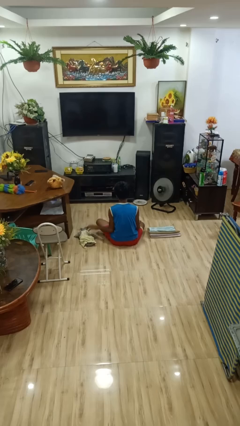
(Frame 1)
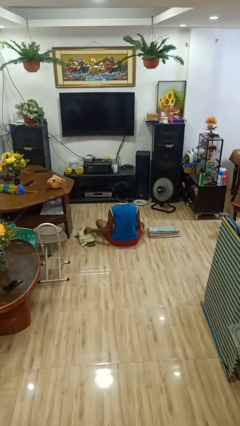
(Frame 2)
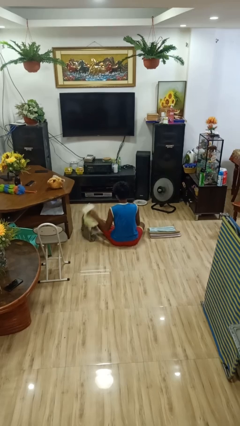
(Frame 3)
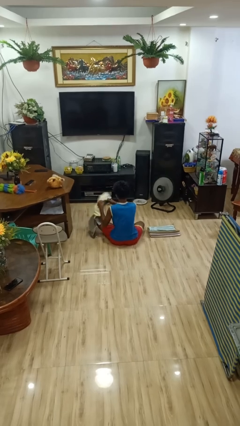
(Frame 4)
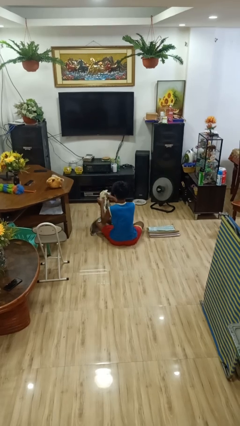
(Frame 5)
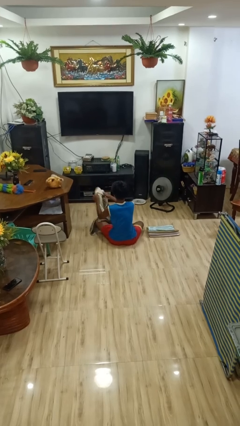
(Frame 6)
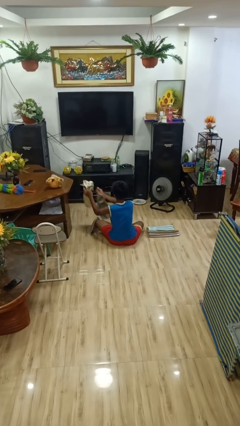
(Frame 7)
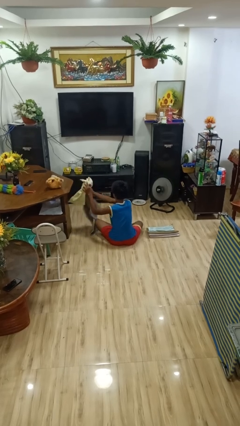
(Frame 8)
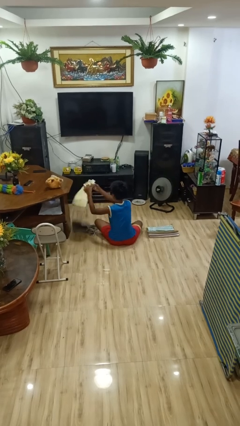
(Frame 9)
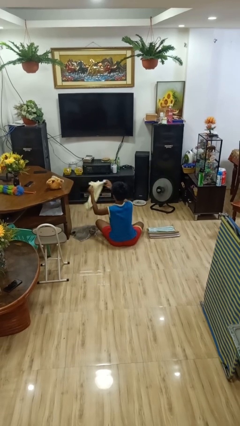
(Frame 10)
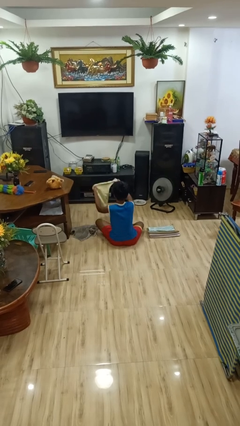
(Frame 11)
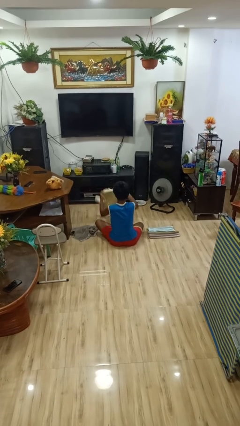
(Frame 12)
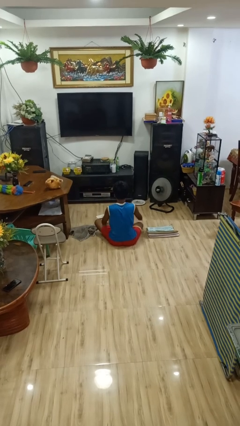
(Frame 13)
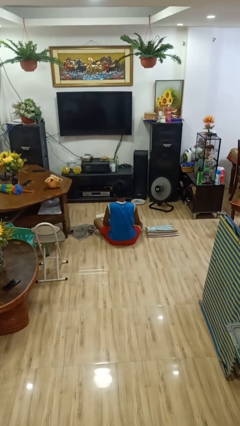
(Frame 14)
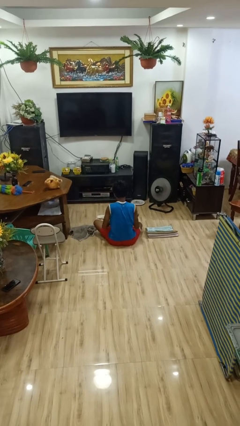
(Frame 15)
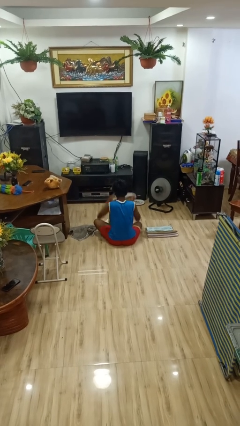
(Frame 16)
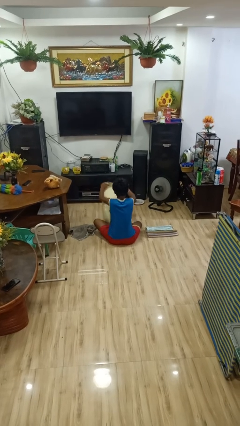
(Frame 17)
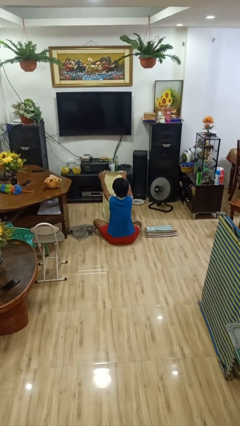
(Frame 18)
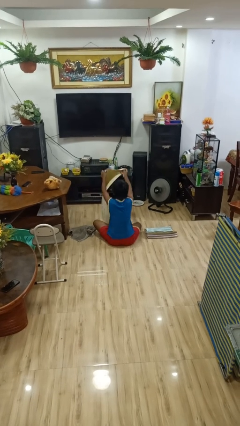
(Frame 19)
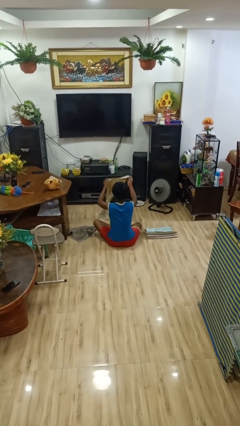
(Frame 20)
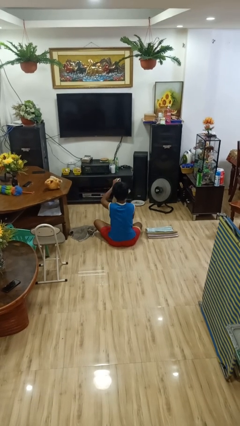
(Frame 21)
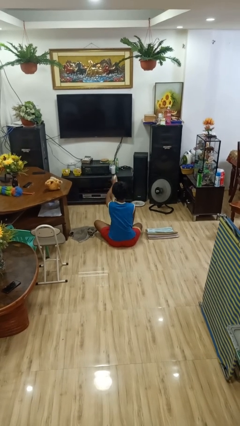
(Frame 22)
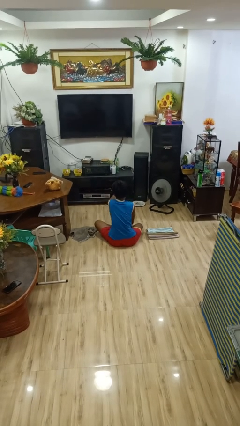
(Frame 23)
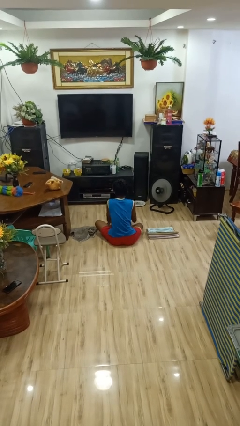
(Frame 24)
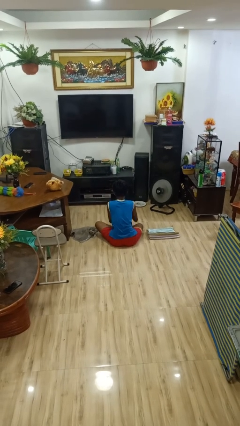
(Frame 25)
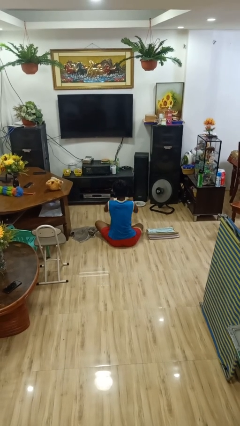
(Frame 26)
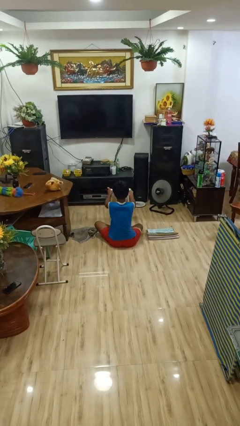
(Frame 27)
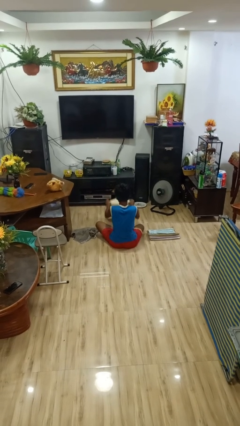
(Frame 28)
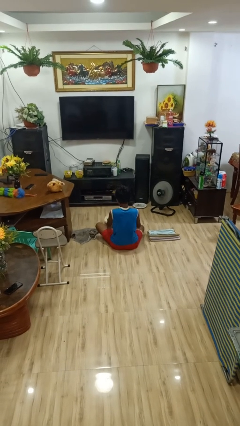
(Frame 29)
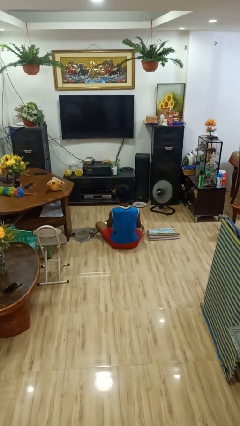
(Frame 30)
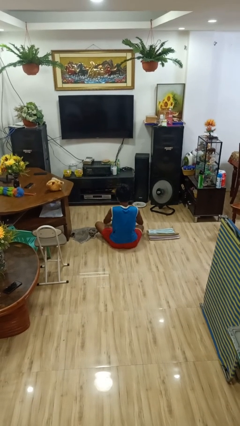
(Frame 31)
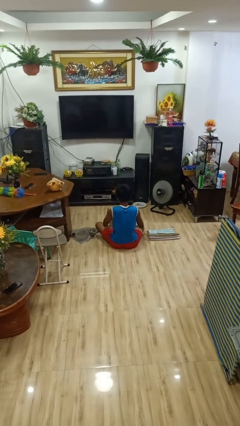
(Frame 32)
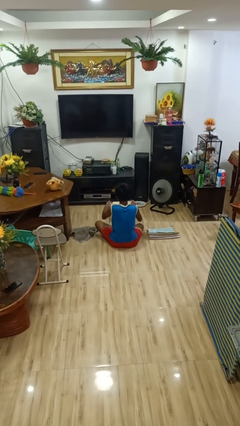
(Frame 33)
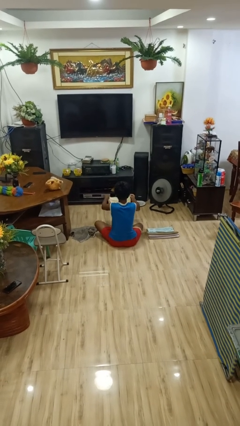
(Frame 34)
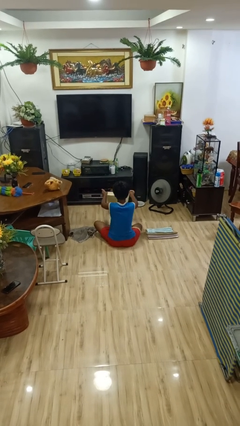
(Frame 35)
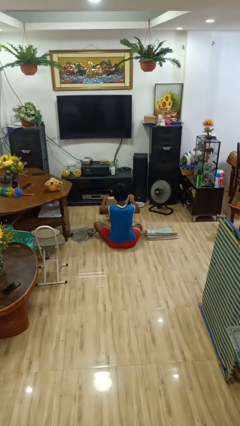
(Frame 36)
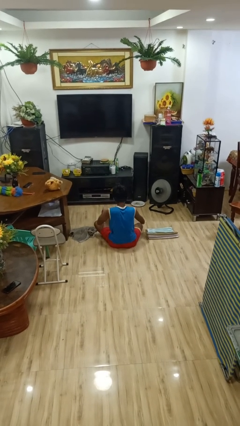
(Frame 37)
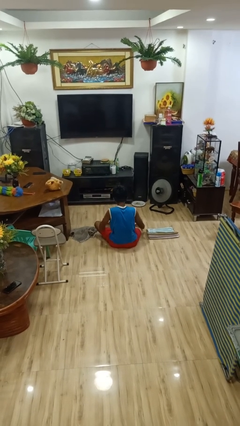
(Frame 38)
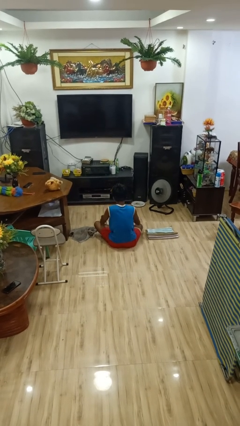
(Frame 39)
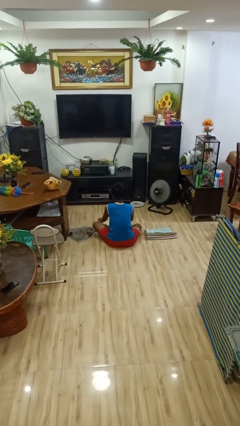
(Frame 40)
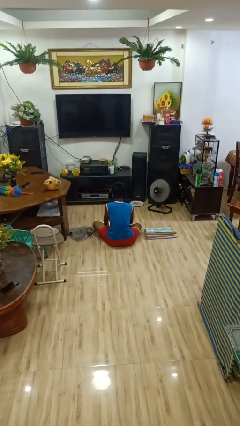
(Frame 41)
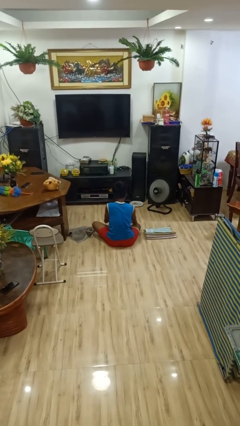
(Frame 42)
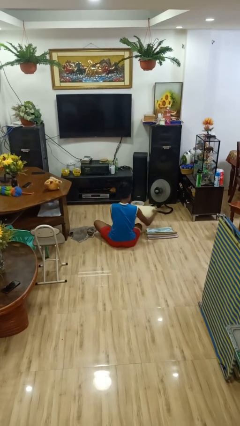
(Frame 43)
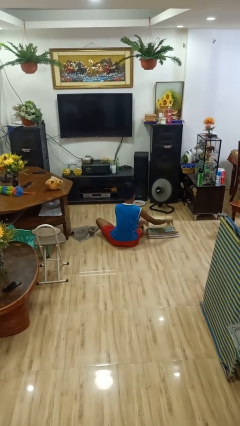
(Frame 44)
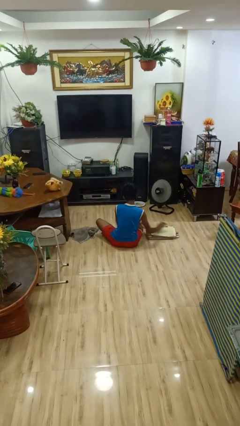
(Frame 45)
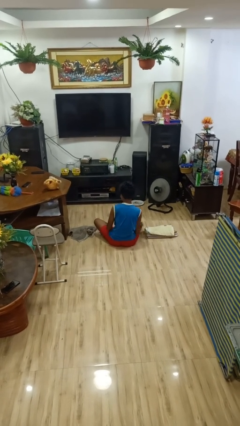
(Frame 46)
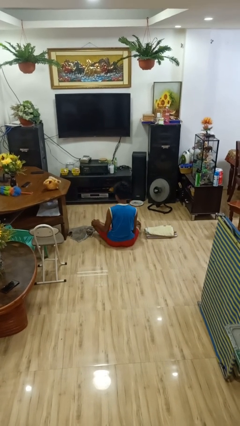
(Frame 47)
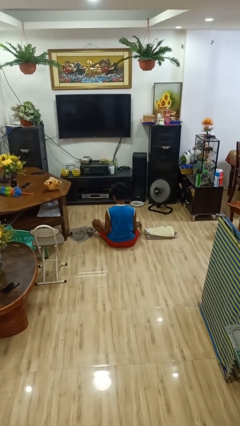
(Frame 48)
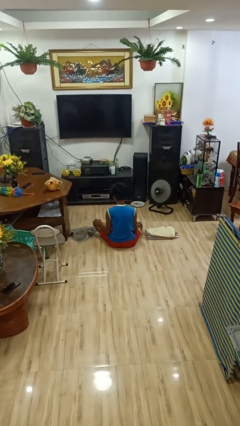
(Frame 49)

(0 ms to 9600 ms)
person folds towel

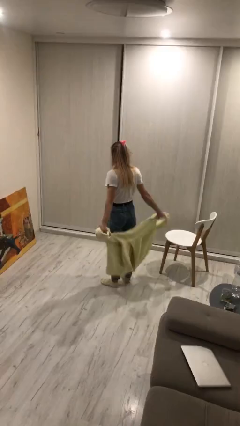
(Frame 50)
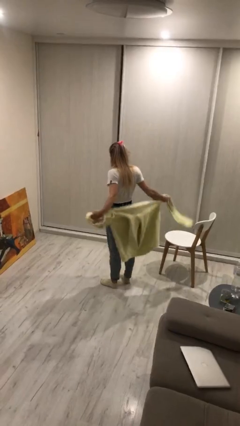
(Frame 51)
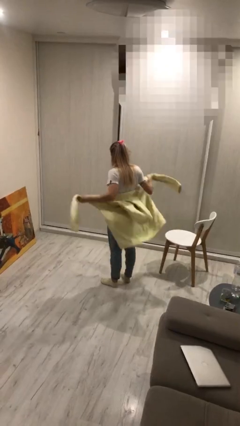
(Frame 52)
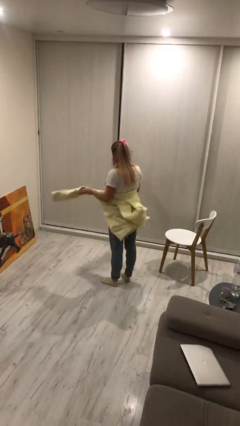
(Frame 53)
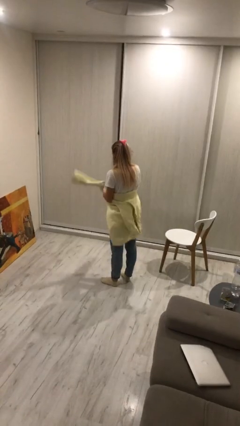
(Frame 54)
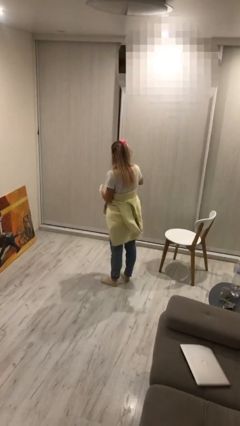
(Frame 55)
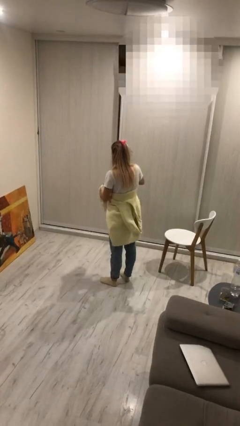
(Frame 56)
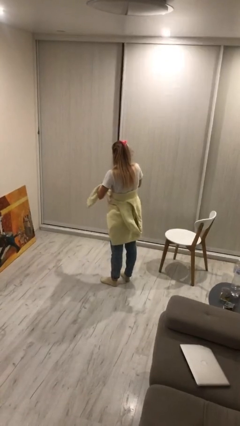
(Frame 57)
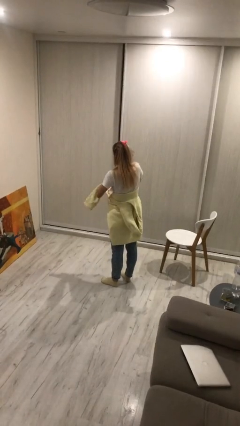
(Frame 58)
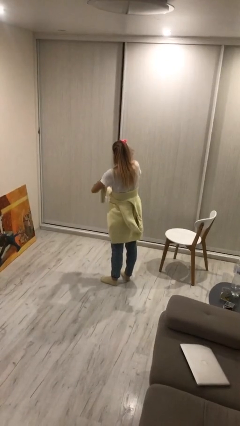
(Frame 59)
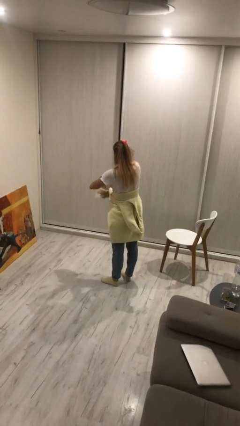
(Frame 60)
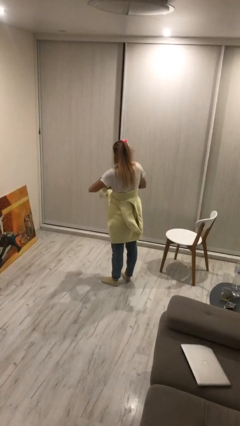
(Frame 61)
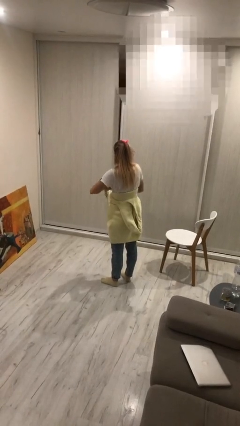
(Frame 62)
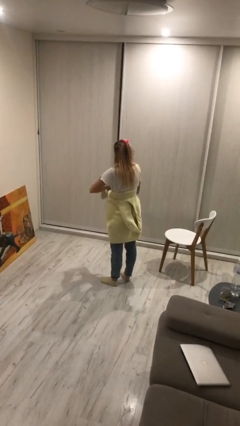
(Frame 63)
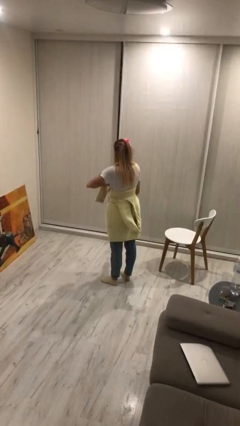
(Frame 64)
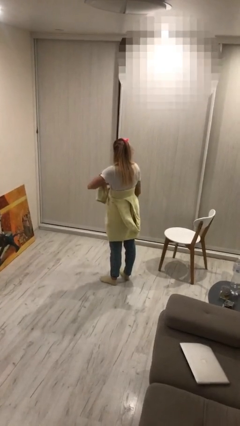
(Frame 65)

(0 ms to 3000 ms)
person ties jacket around waist

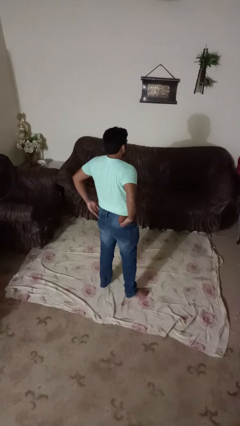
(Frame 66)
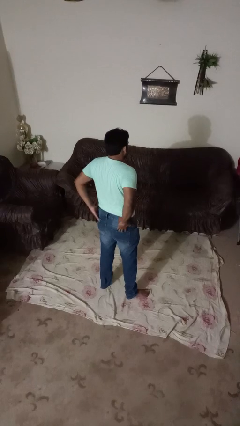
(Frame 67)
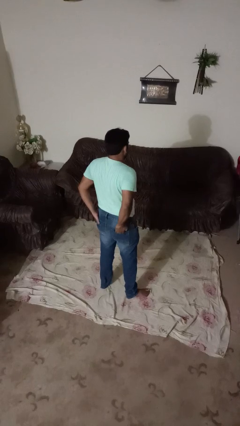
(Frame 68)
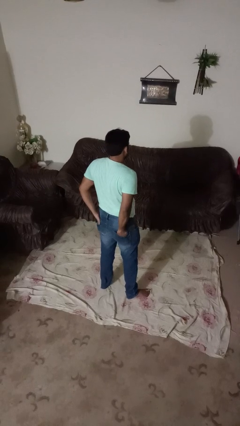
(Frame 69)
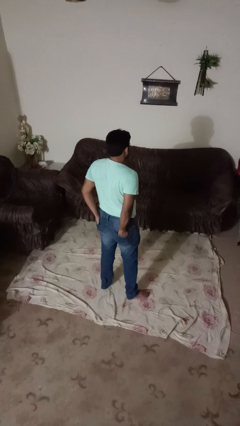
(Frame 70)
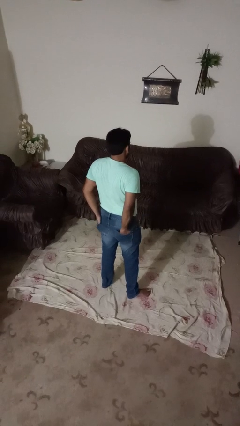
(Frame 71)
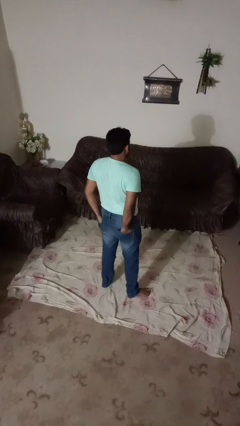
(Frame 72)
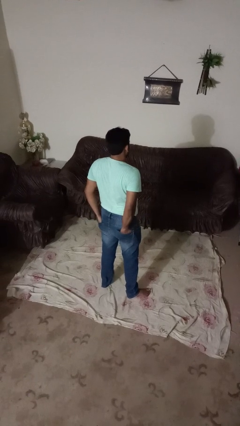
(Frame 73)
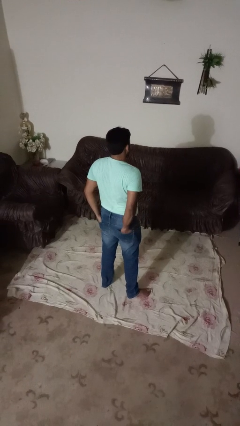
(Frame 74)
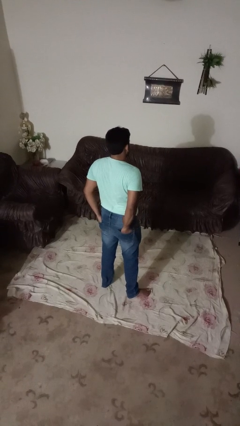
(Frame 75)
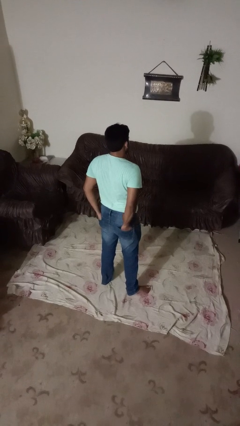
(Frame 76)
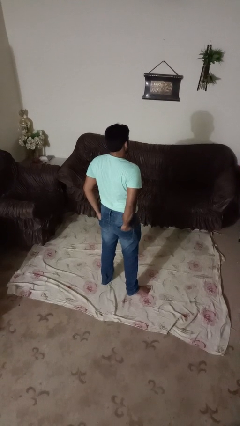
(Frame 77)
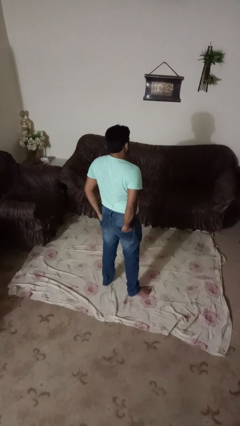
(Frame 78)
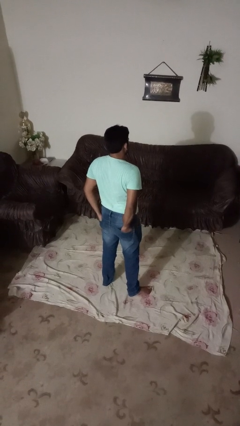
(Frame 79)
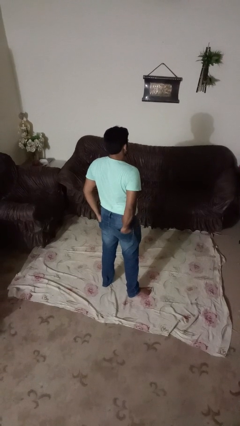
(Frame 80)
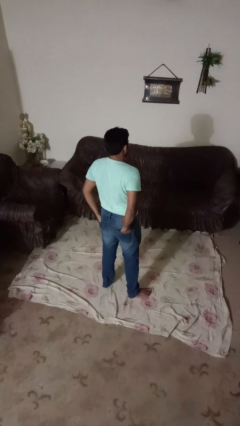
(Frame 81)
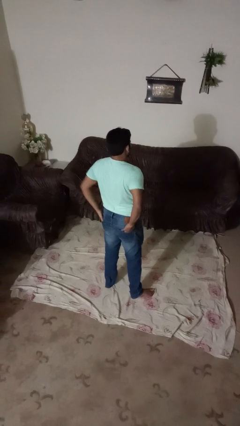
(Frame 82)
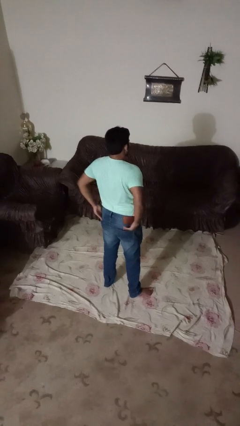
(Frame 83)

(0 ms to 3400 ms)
person puts hands in back pockets

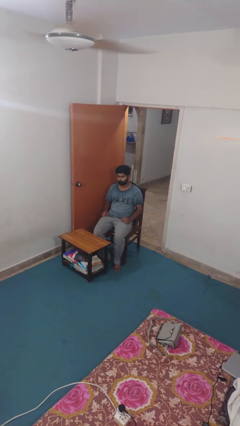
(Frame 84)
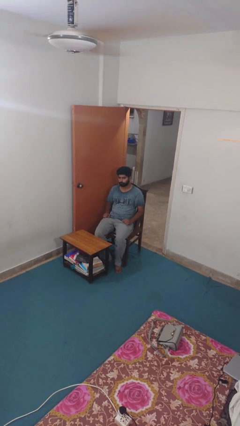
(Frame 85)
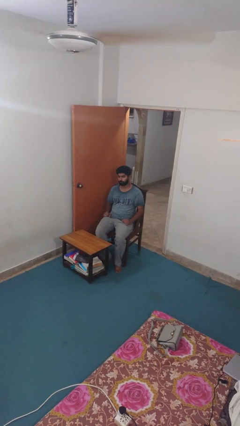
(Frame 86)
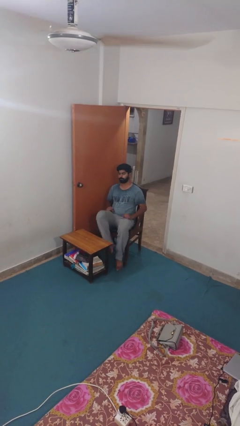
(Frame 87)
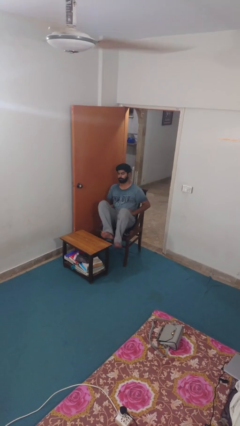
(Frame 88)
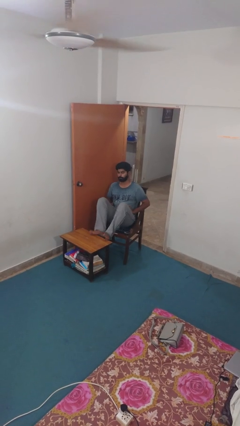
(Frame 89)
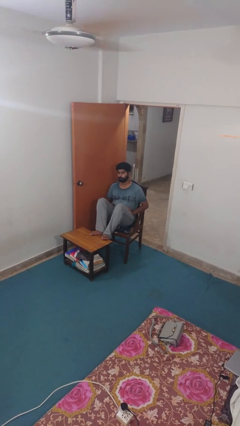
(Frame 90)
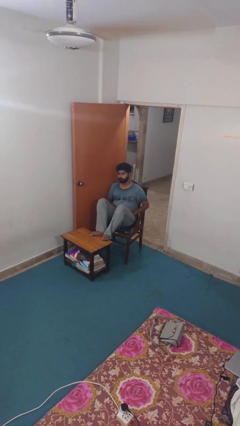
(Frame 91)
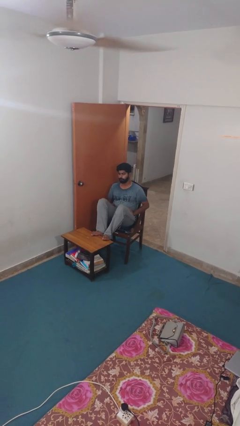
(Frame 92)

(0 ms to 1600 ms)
person puts feet up

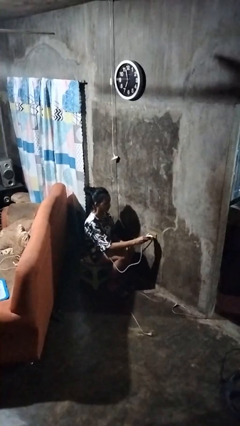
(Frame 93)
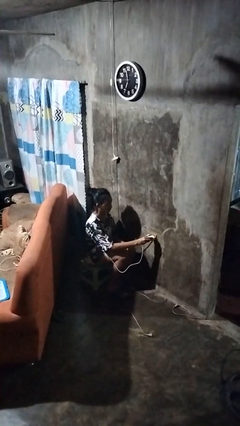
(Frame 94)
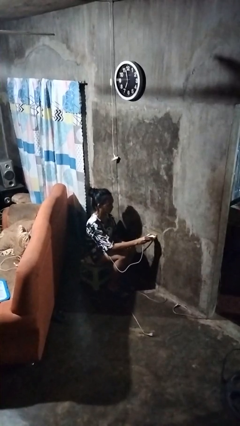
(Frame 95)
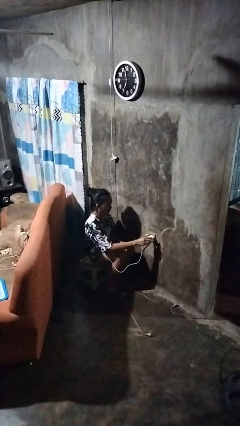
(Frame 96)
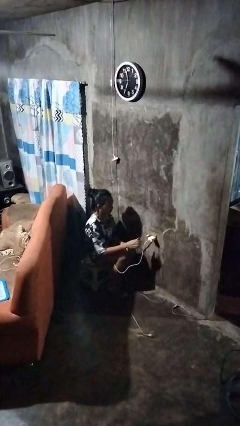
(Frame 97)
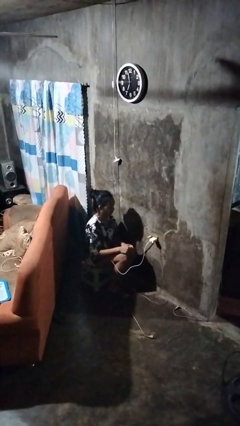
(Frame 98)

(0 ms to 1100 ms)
person plugs into electrical socket
